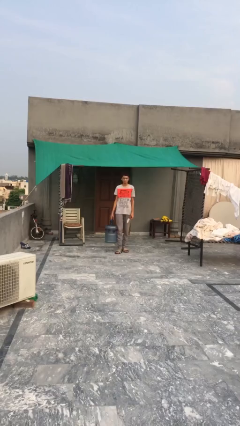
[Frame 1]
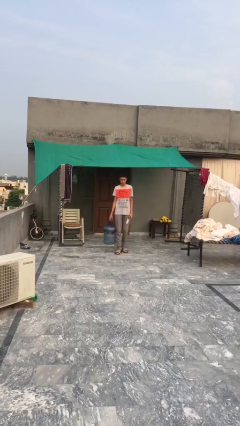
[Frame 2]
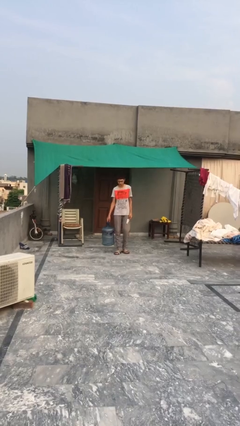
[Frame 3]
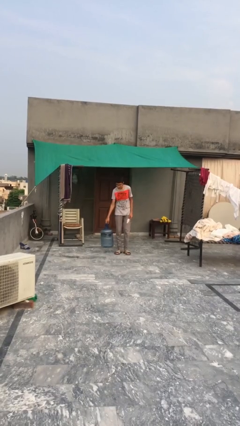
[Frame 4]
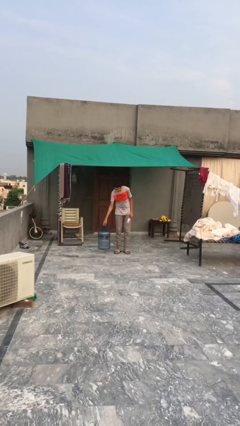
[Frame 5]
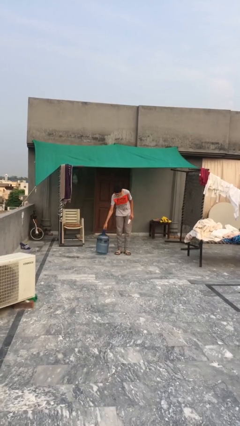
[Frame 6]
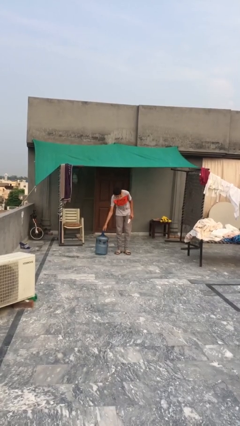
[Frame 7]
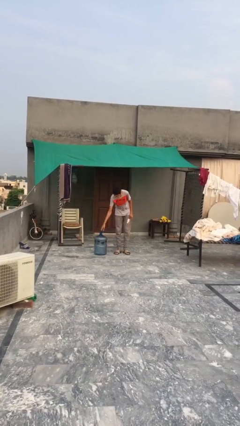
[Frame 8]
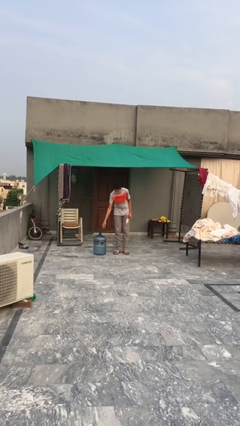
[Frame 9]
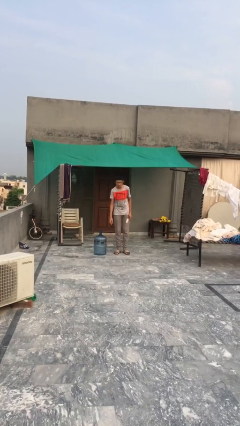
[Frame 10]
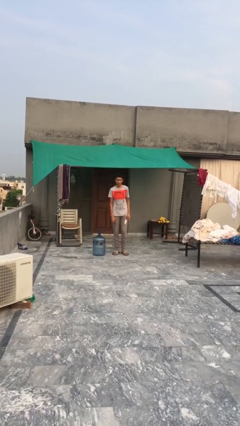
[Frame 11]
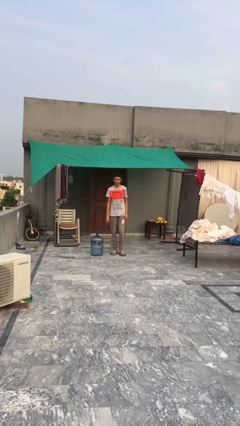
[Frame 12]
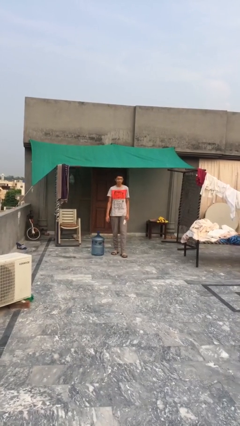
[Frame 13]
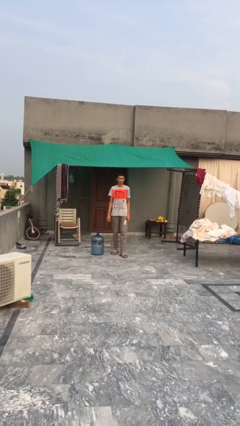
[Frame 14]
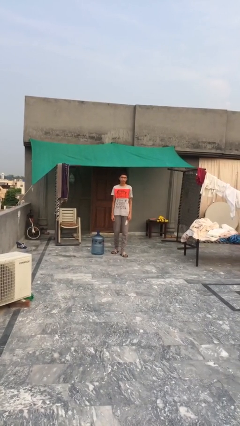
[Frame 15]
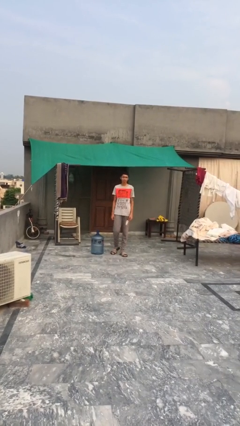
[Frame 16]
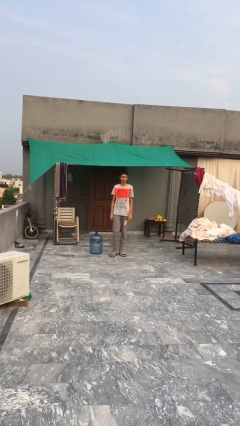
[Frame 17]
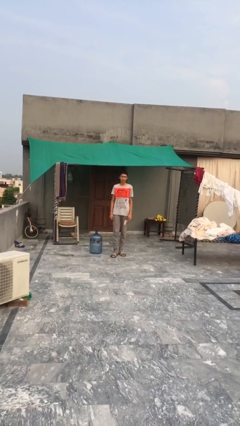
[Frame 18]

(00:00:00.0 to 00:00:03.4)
person puts down object on floor

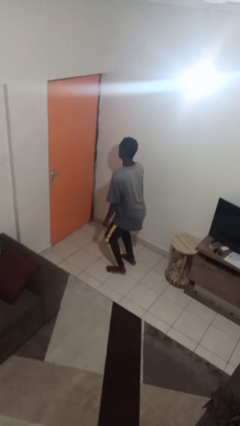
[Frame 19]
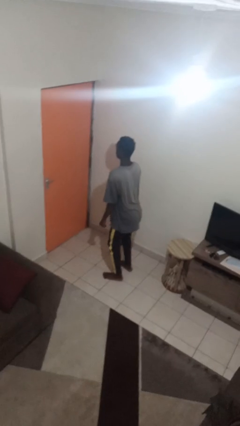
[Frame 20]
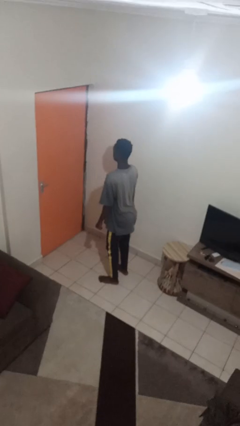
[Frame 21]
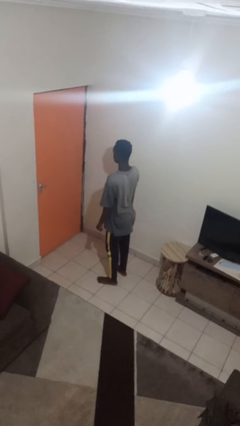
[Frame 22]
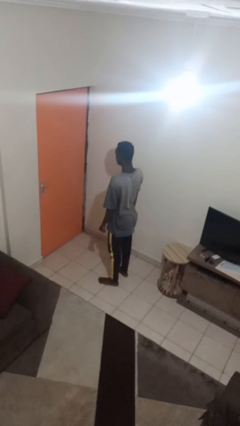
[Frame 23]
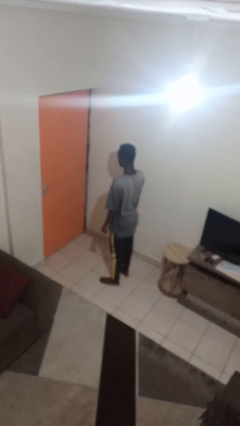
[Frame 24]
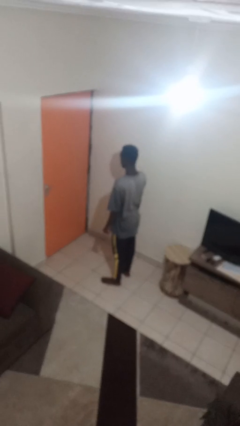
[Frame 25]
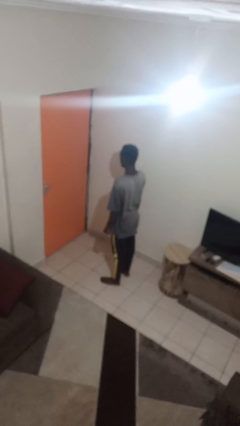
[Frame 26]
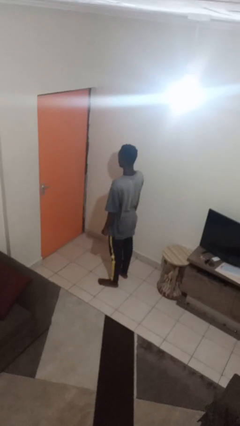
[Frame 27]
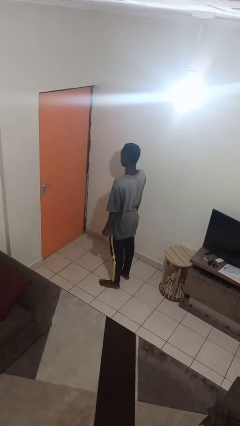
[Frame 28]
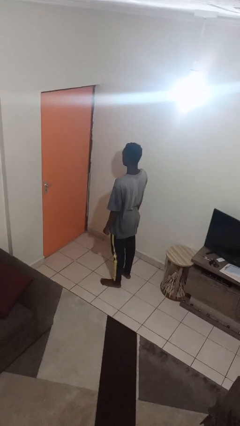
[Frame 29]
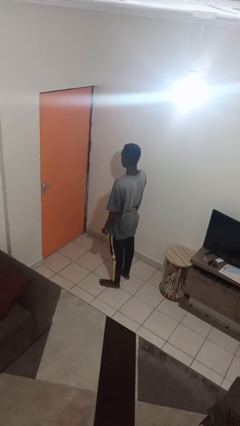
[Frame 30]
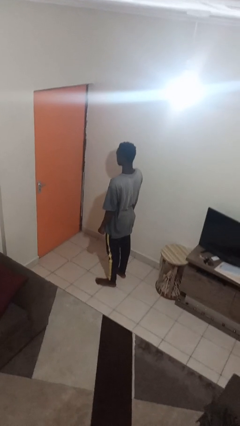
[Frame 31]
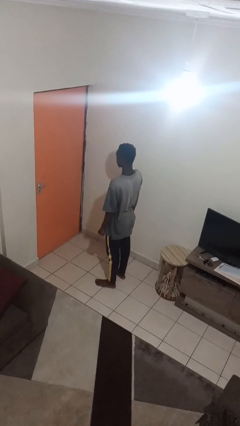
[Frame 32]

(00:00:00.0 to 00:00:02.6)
person stands up

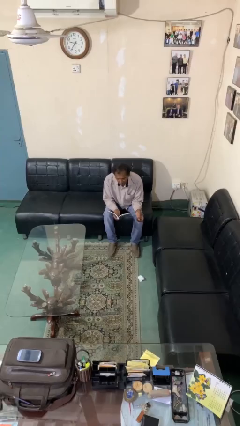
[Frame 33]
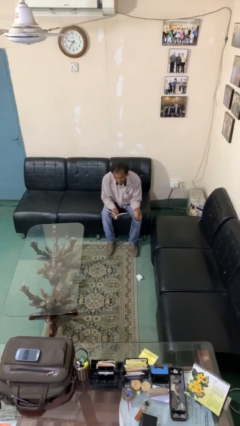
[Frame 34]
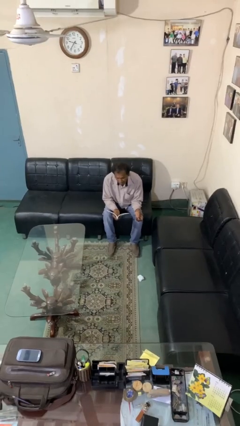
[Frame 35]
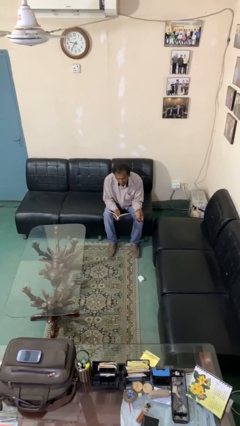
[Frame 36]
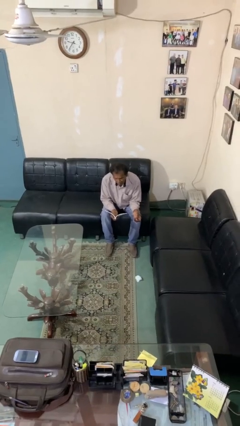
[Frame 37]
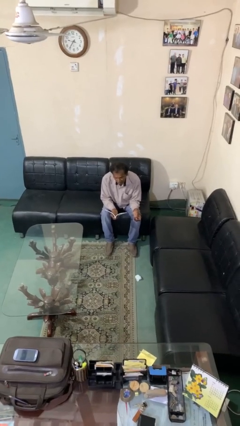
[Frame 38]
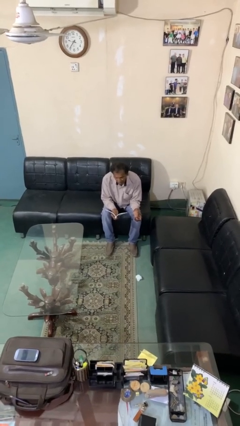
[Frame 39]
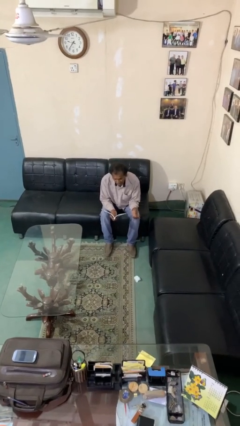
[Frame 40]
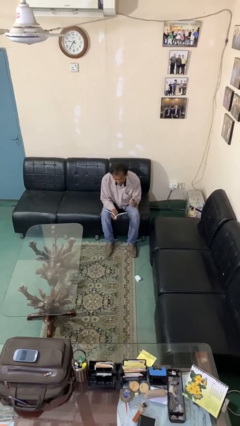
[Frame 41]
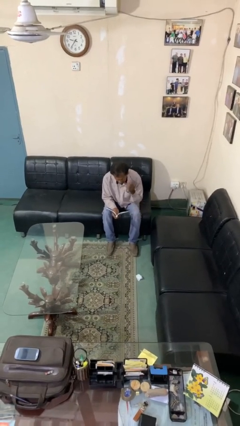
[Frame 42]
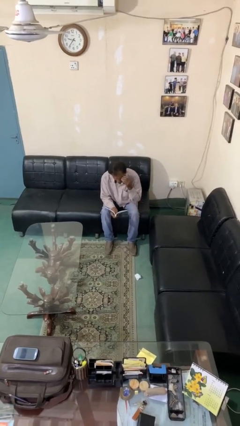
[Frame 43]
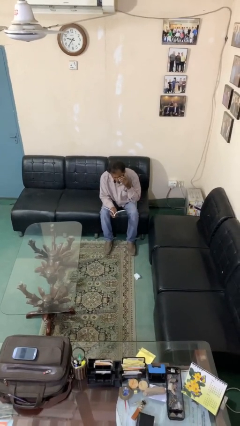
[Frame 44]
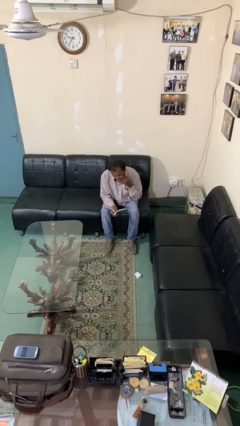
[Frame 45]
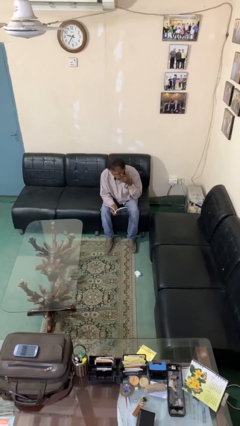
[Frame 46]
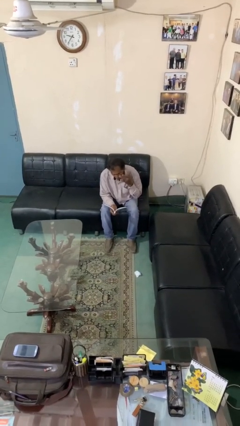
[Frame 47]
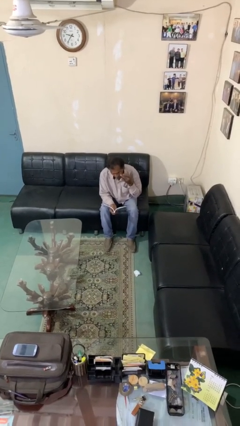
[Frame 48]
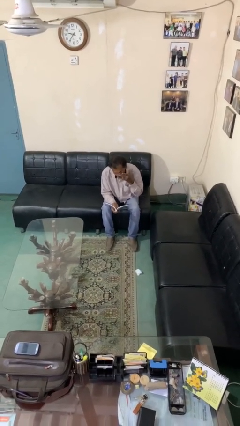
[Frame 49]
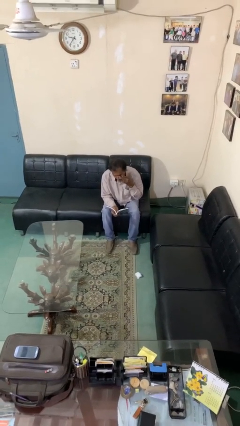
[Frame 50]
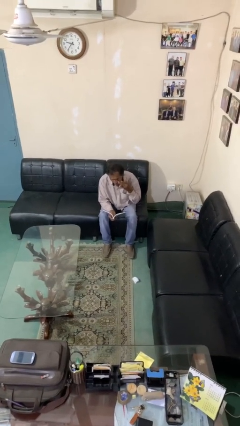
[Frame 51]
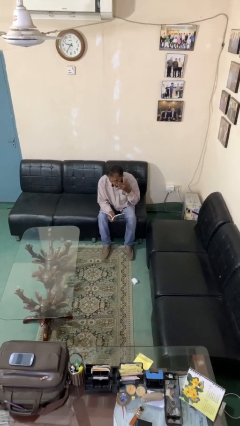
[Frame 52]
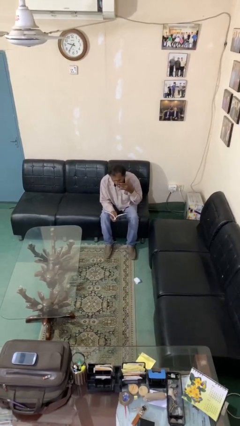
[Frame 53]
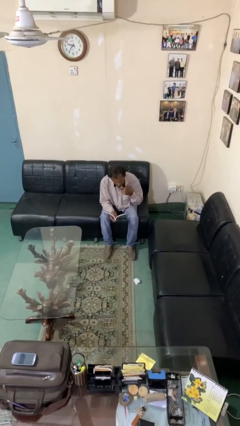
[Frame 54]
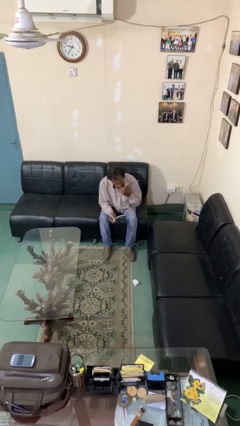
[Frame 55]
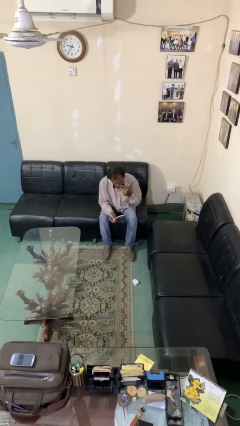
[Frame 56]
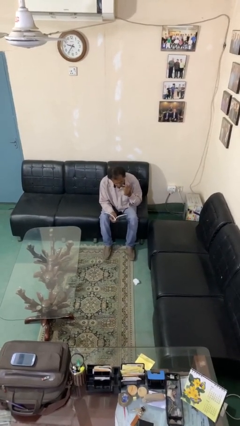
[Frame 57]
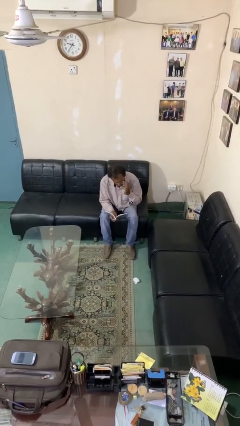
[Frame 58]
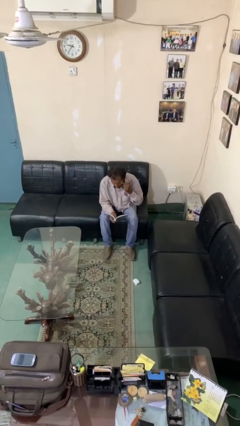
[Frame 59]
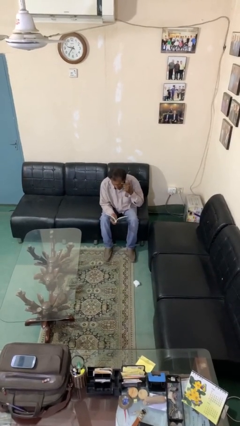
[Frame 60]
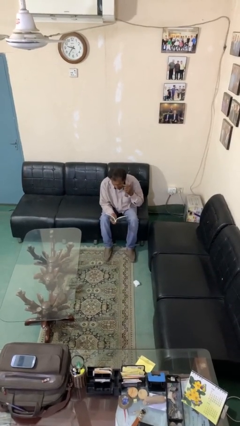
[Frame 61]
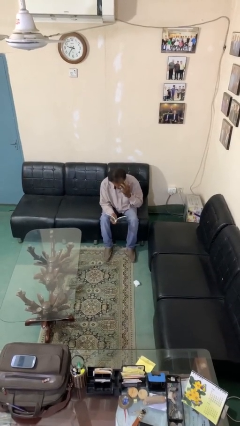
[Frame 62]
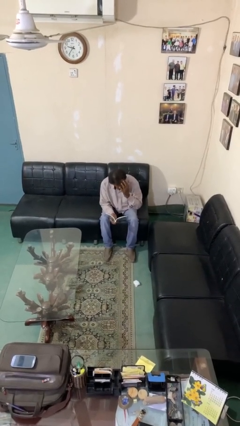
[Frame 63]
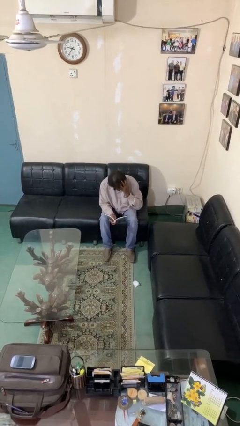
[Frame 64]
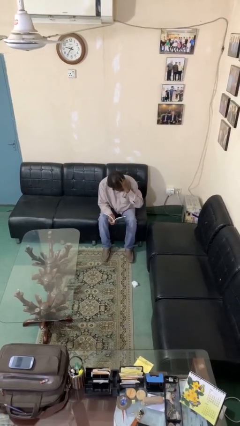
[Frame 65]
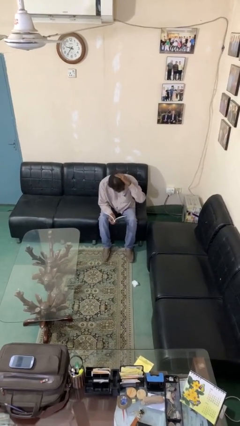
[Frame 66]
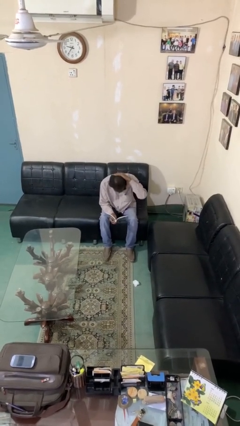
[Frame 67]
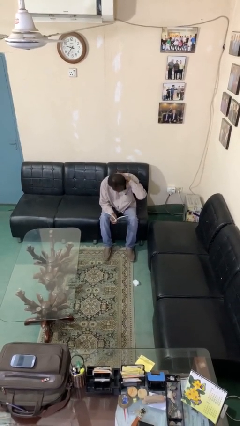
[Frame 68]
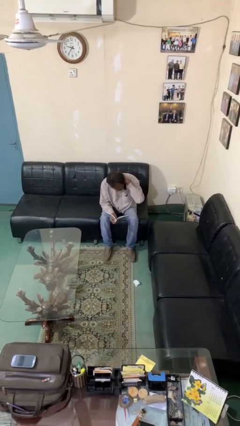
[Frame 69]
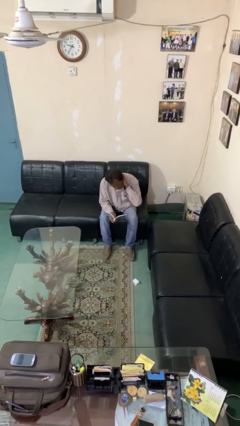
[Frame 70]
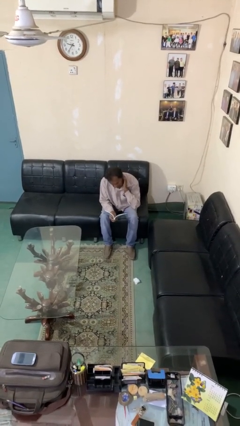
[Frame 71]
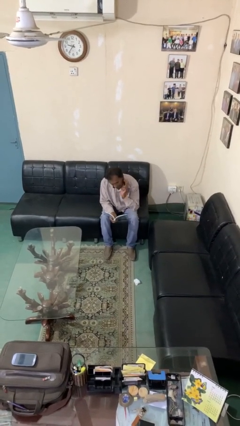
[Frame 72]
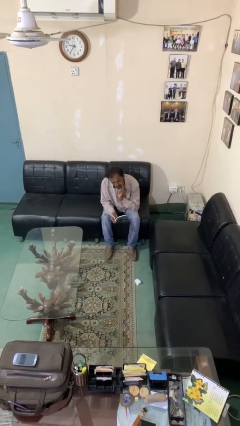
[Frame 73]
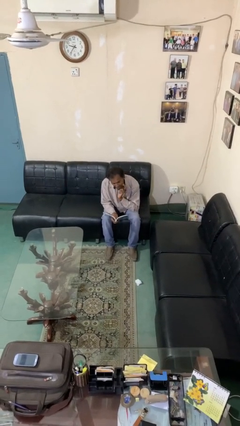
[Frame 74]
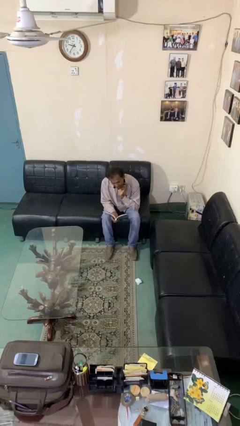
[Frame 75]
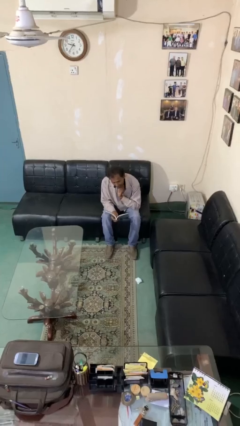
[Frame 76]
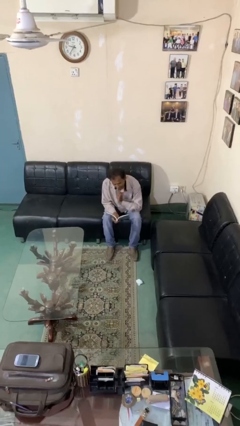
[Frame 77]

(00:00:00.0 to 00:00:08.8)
person reads document

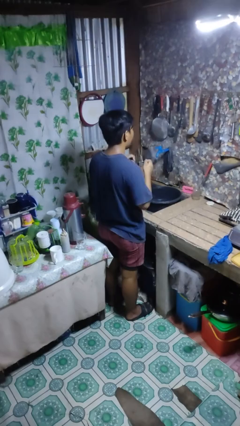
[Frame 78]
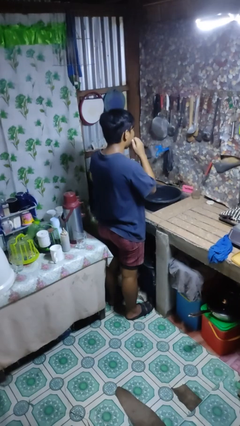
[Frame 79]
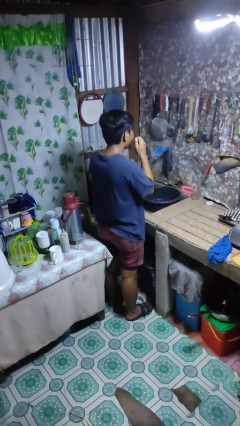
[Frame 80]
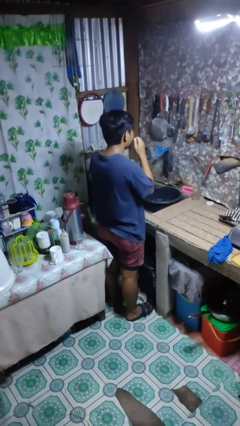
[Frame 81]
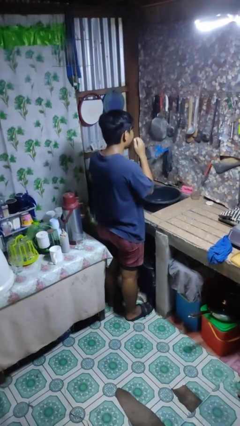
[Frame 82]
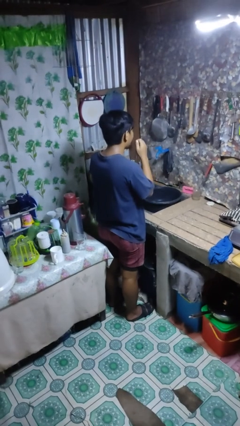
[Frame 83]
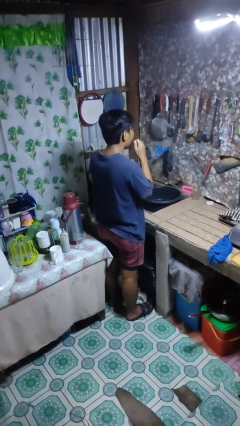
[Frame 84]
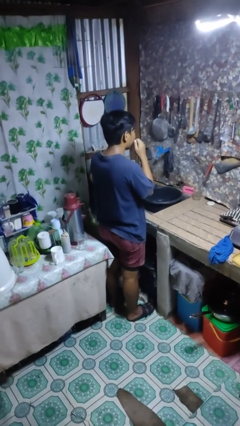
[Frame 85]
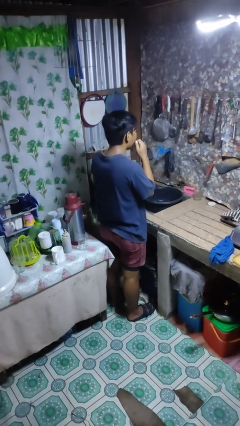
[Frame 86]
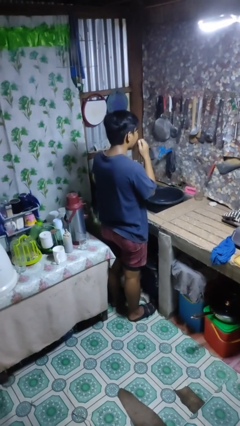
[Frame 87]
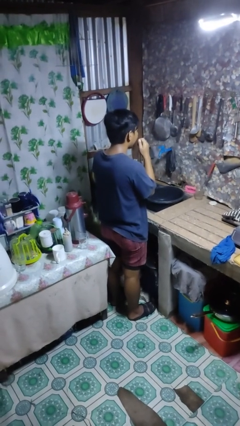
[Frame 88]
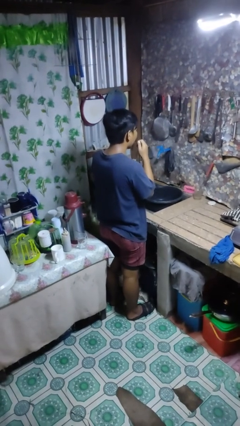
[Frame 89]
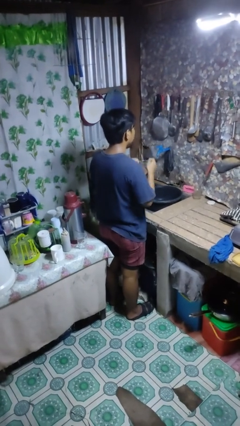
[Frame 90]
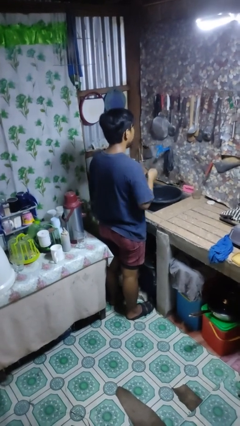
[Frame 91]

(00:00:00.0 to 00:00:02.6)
person flosses

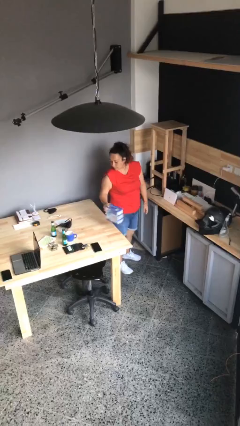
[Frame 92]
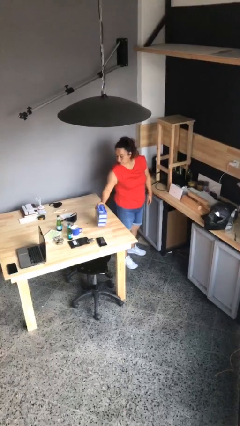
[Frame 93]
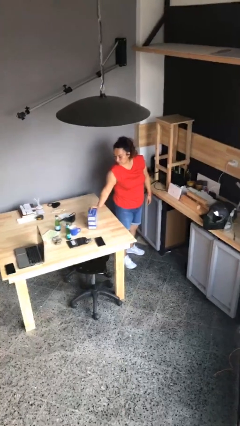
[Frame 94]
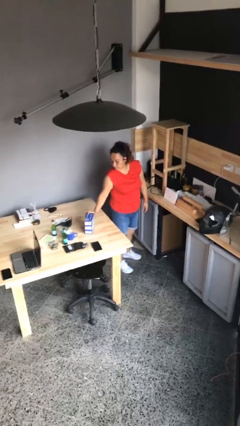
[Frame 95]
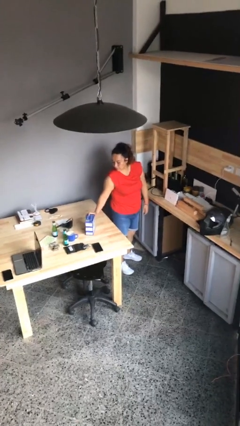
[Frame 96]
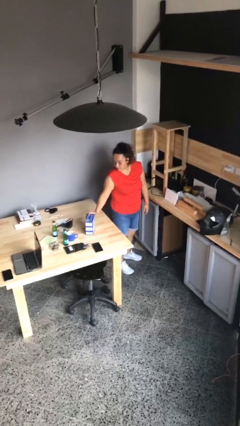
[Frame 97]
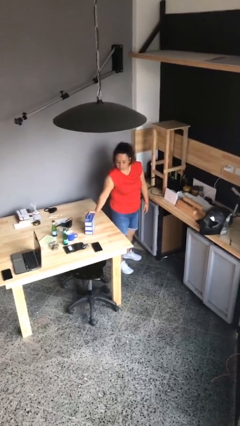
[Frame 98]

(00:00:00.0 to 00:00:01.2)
person puts down object on table
